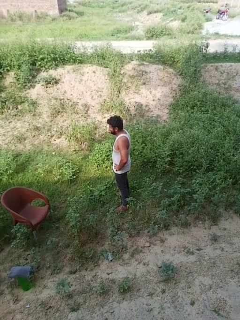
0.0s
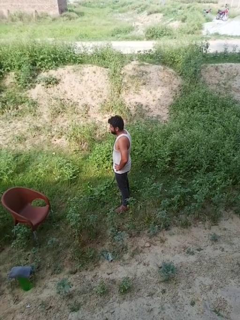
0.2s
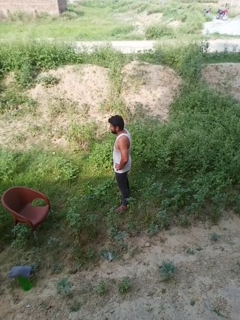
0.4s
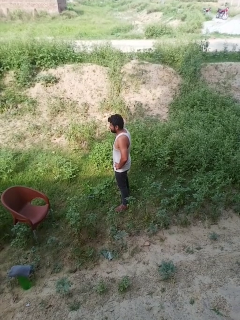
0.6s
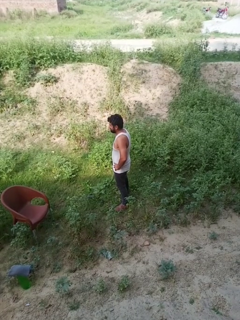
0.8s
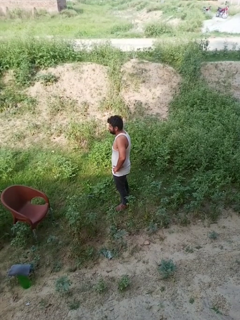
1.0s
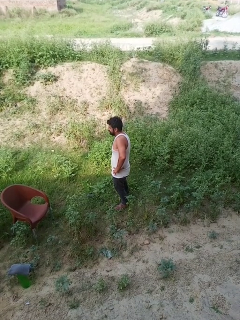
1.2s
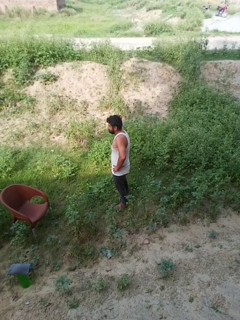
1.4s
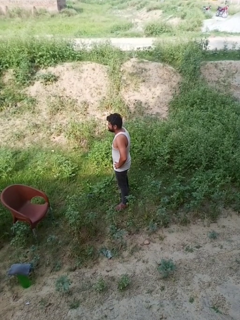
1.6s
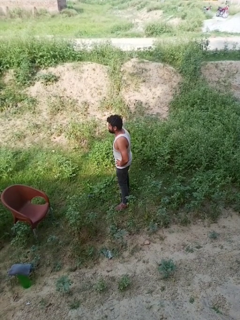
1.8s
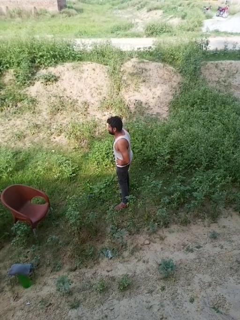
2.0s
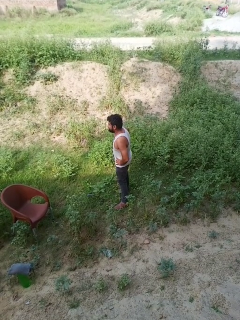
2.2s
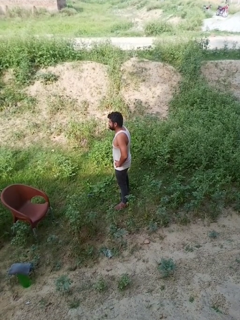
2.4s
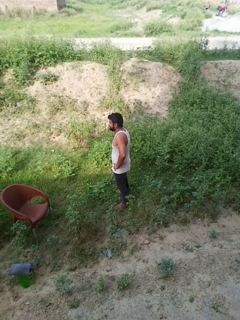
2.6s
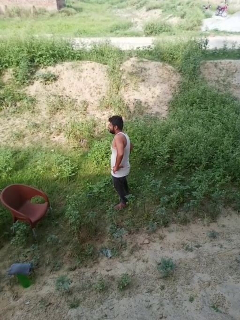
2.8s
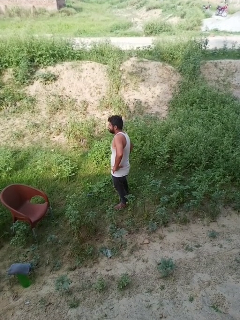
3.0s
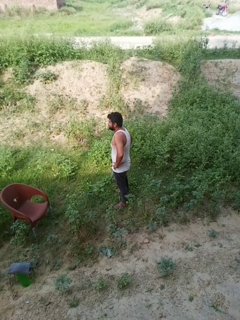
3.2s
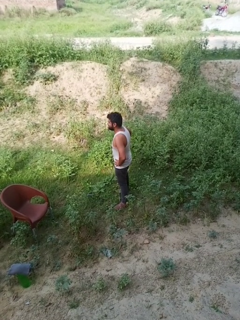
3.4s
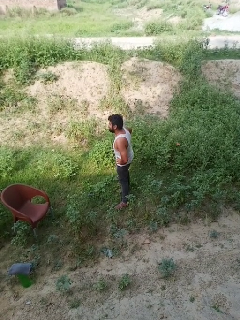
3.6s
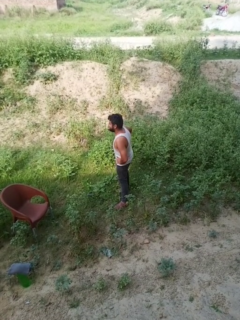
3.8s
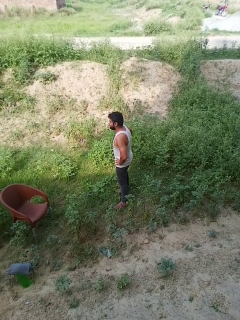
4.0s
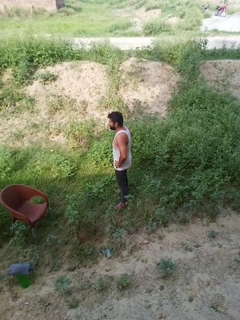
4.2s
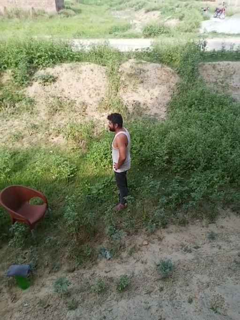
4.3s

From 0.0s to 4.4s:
person wiggles hips

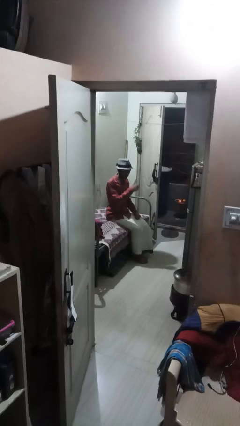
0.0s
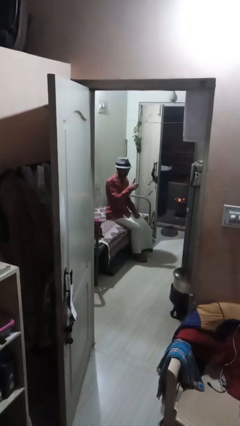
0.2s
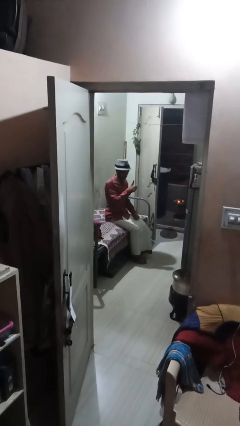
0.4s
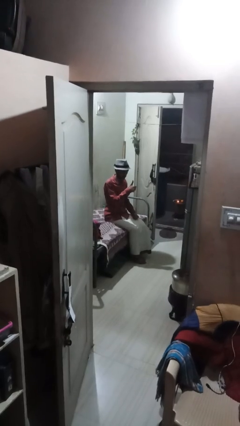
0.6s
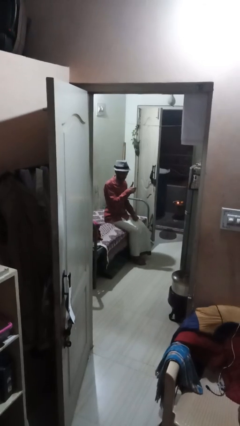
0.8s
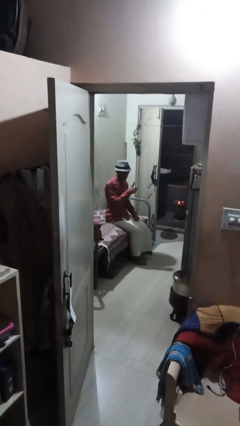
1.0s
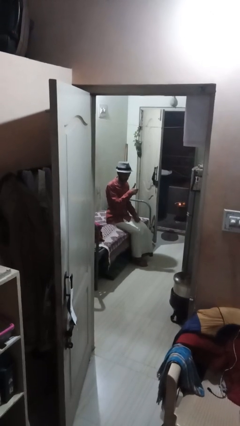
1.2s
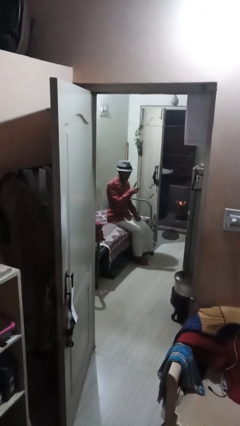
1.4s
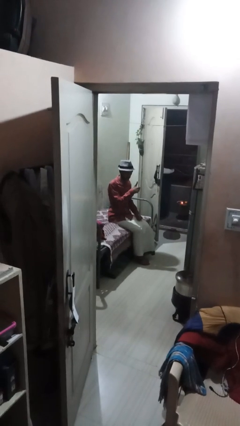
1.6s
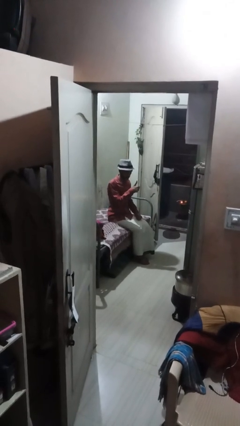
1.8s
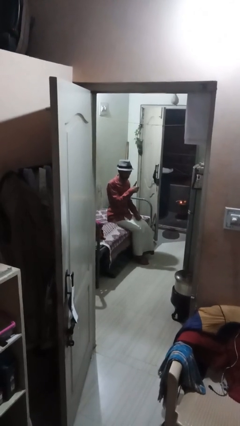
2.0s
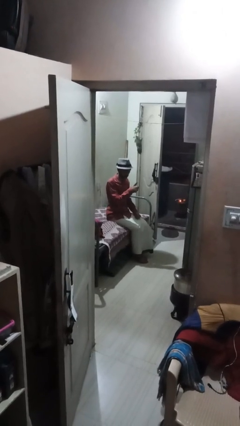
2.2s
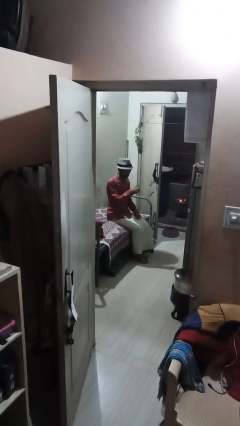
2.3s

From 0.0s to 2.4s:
person gestures thumbs up

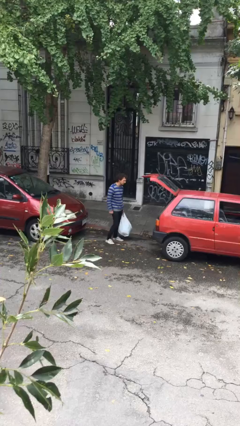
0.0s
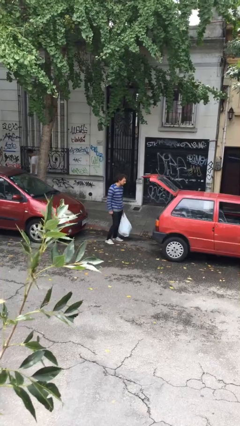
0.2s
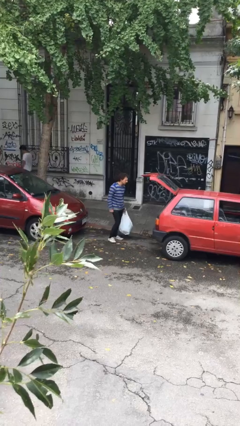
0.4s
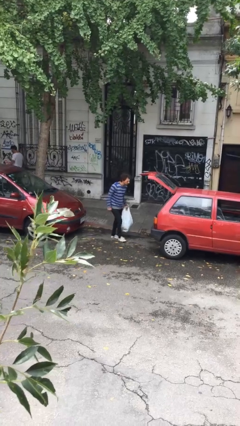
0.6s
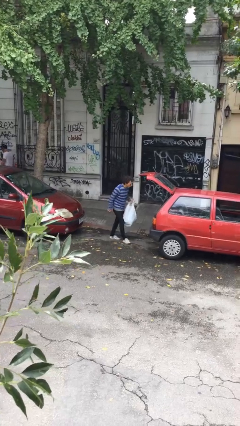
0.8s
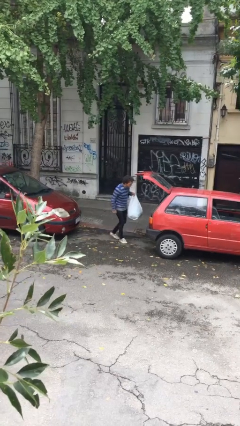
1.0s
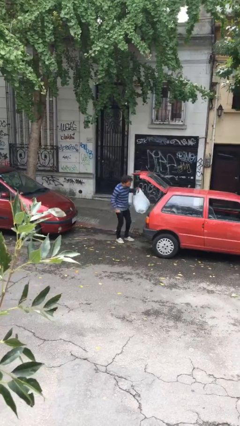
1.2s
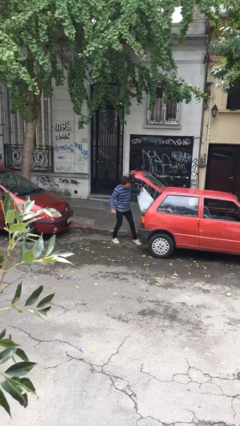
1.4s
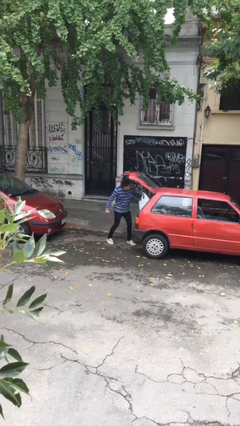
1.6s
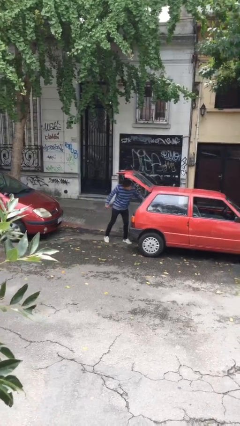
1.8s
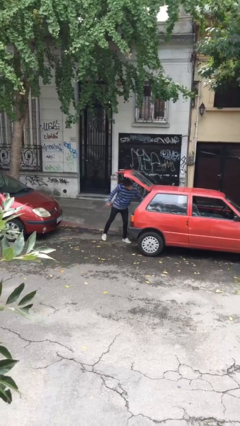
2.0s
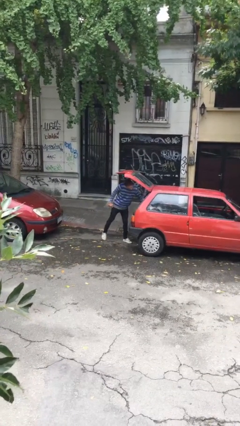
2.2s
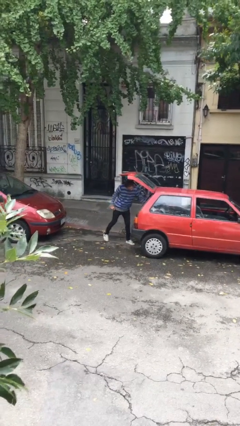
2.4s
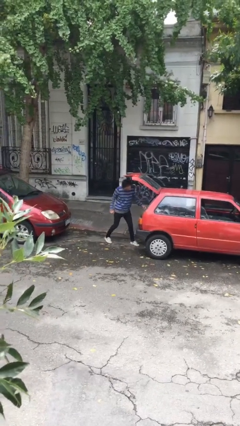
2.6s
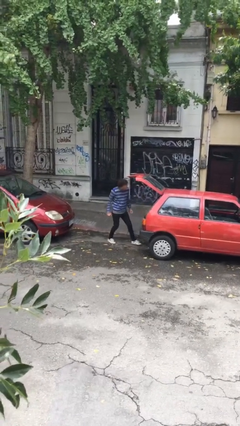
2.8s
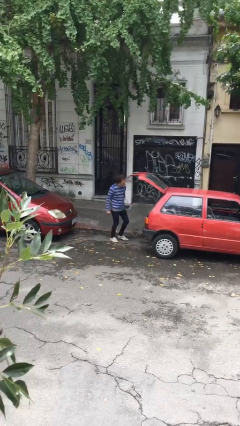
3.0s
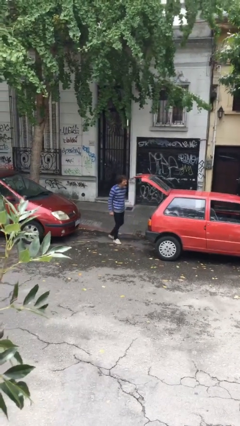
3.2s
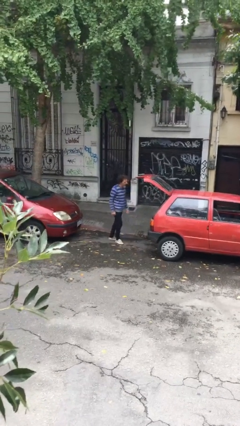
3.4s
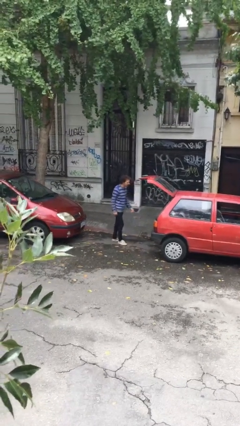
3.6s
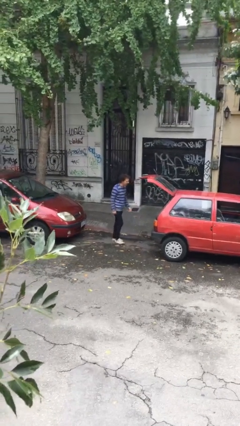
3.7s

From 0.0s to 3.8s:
person loads car

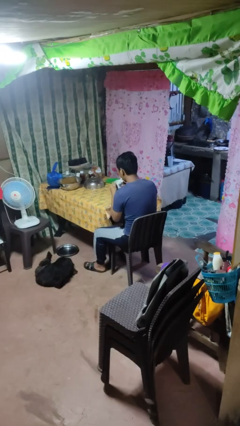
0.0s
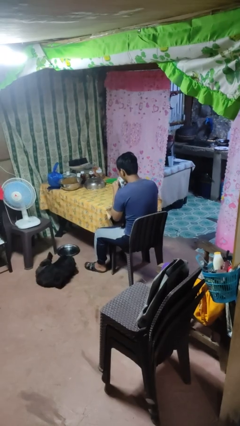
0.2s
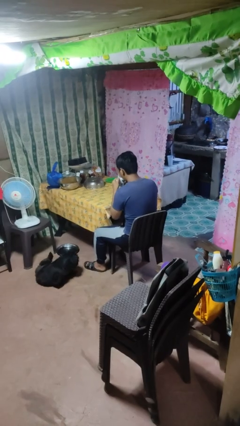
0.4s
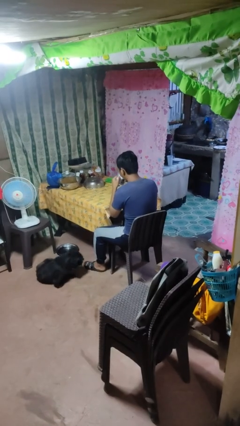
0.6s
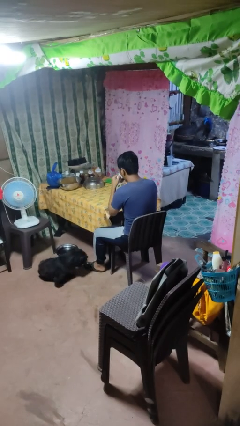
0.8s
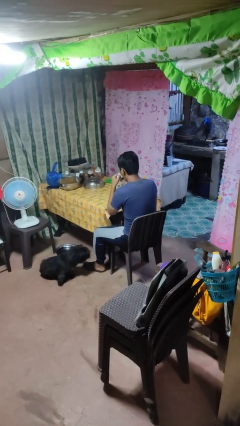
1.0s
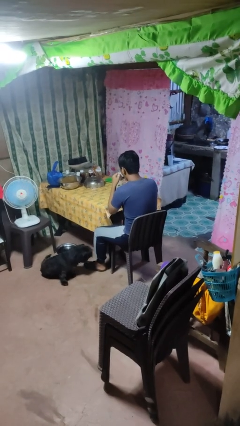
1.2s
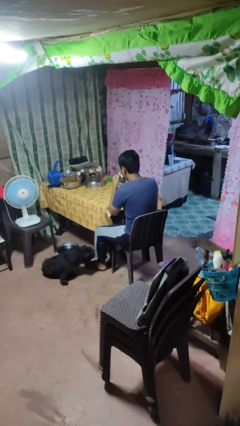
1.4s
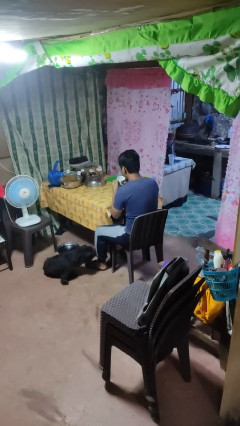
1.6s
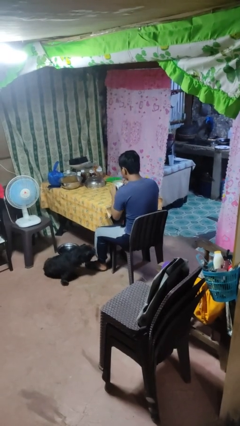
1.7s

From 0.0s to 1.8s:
person drinks from mug

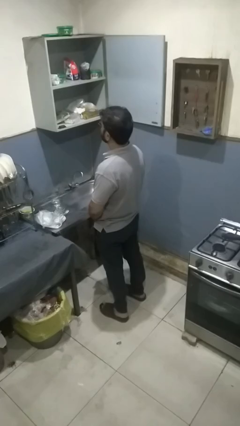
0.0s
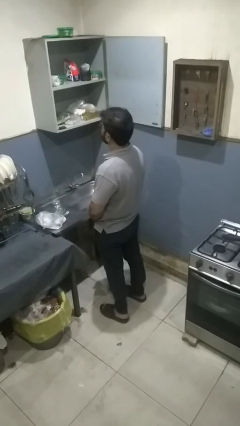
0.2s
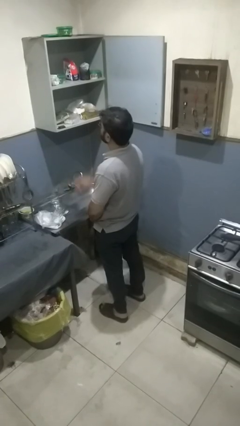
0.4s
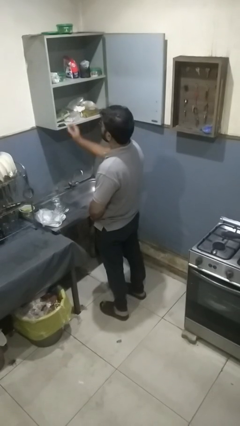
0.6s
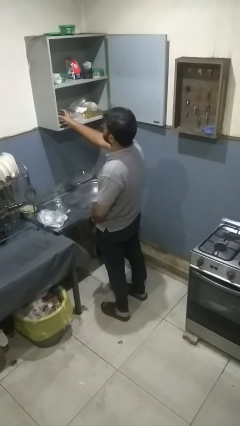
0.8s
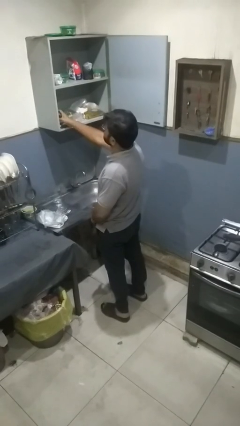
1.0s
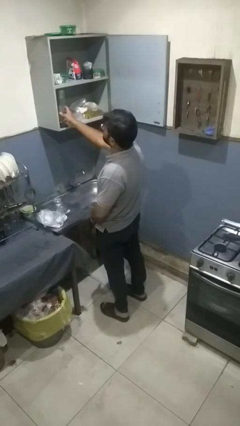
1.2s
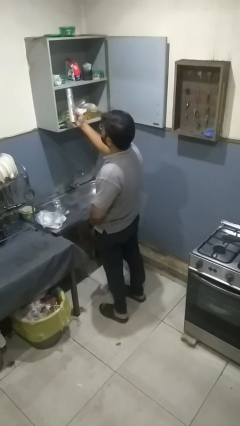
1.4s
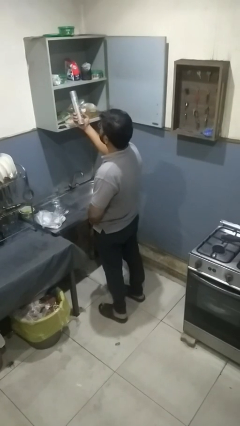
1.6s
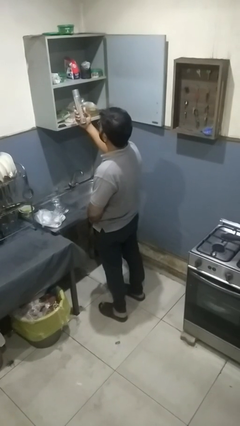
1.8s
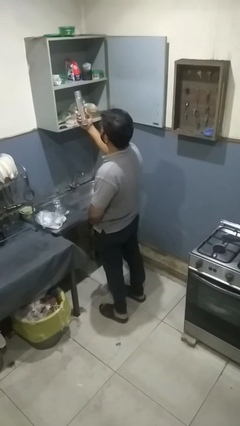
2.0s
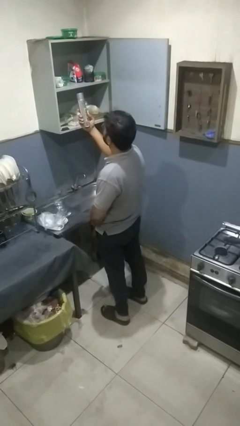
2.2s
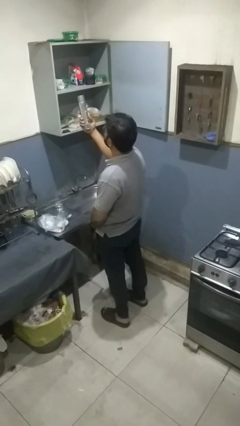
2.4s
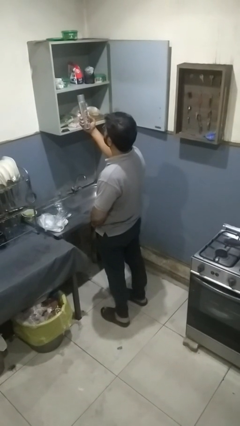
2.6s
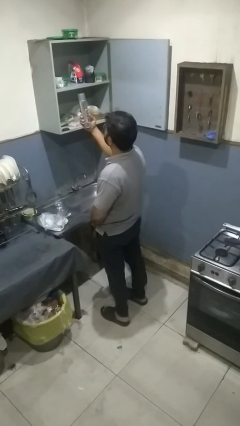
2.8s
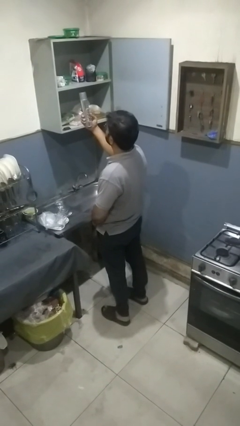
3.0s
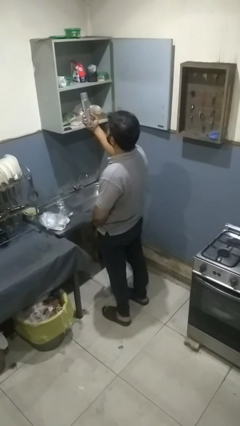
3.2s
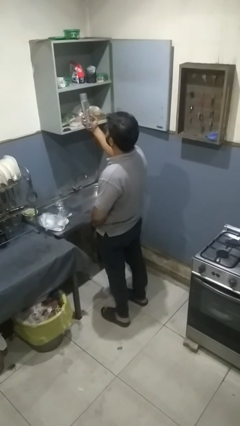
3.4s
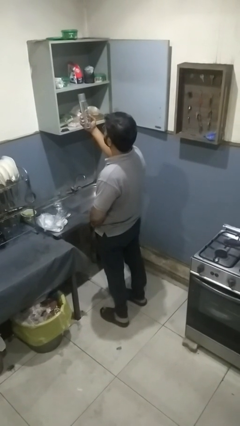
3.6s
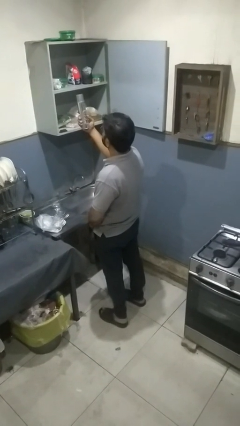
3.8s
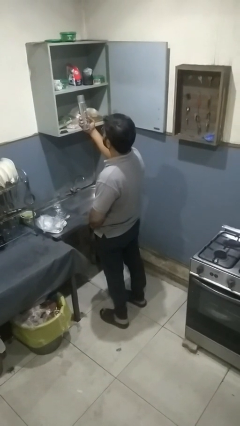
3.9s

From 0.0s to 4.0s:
person picks up object from cabinet

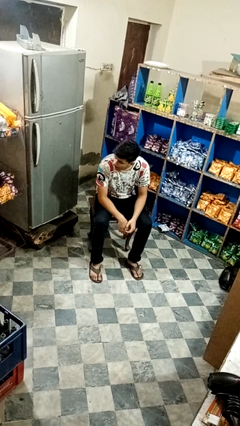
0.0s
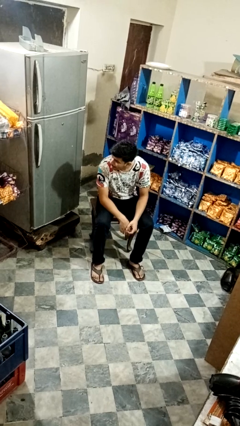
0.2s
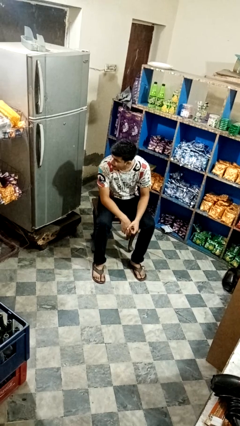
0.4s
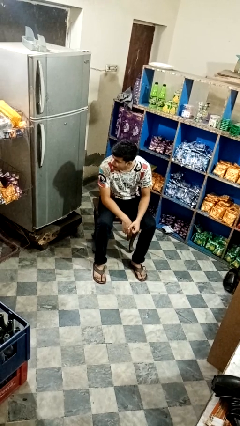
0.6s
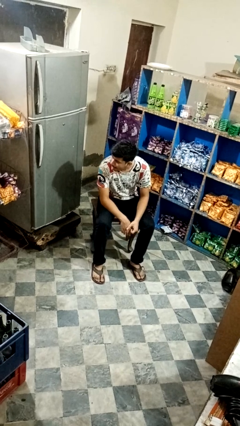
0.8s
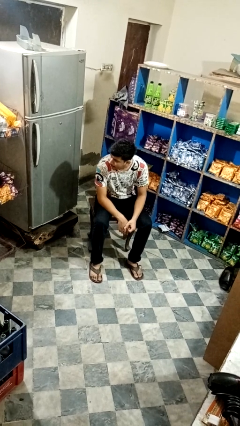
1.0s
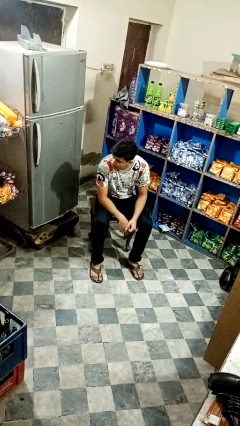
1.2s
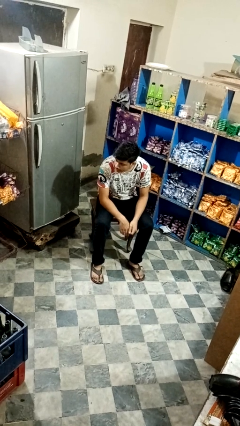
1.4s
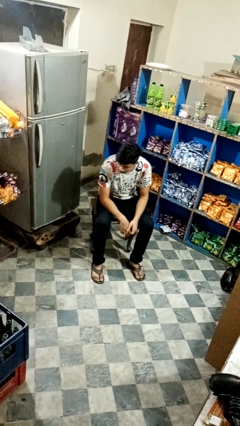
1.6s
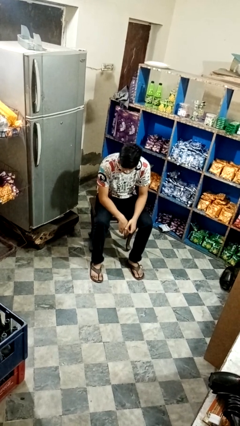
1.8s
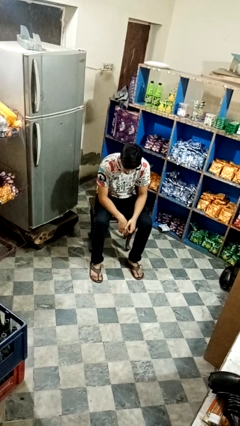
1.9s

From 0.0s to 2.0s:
person sticks out tongue

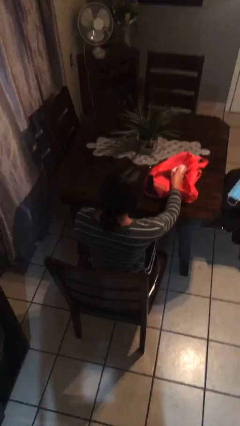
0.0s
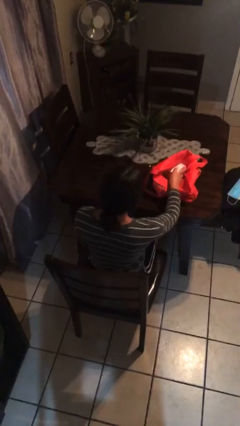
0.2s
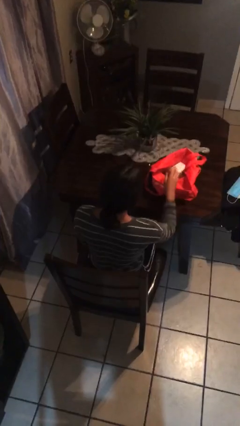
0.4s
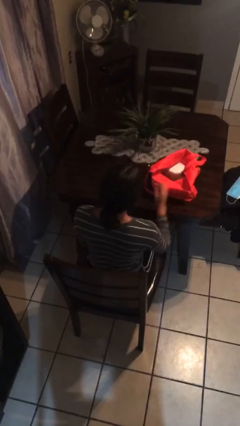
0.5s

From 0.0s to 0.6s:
person puts object into bag
